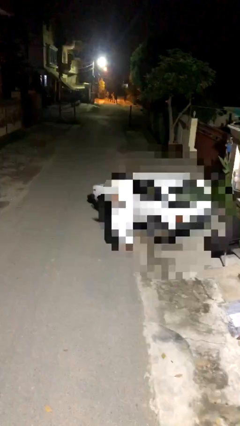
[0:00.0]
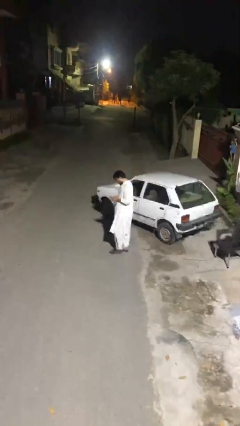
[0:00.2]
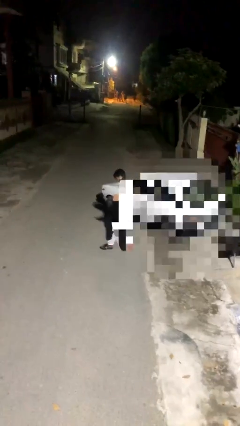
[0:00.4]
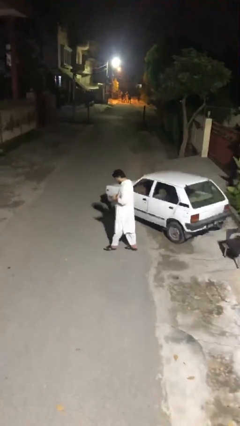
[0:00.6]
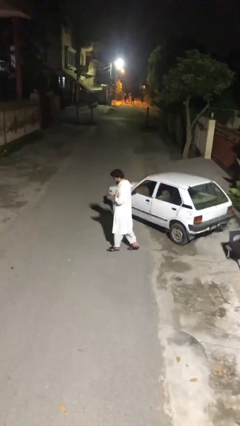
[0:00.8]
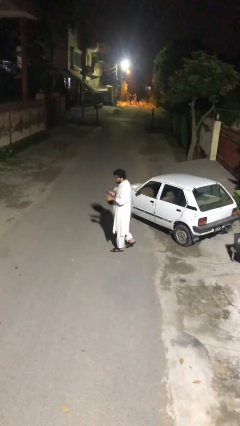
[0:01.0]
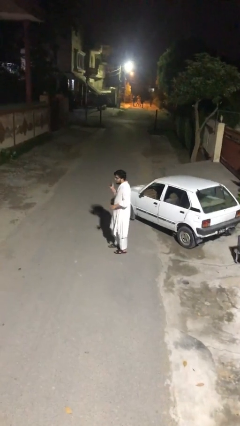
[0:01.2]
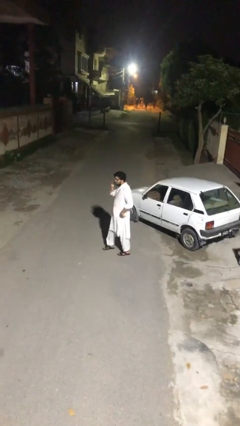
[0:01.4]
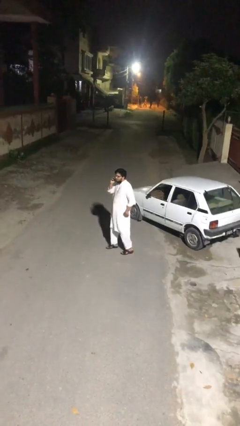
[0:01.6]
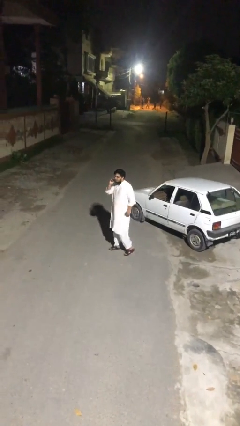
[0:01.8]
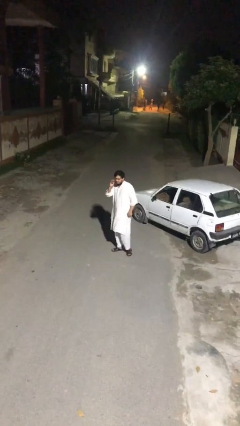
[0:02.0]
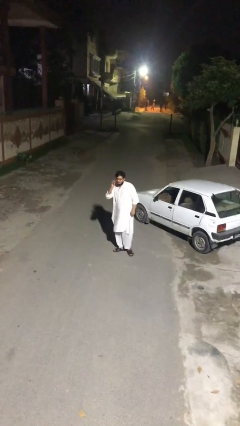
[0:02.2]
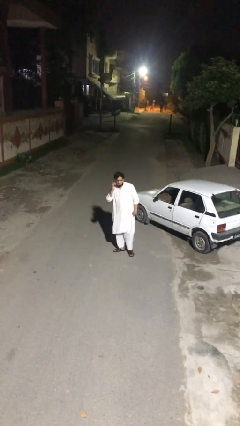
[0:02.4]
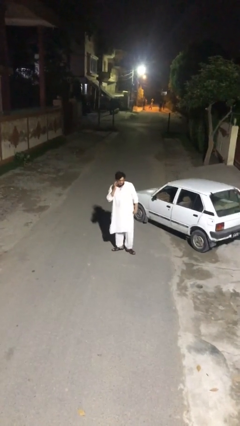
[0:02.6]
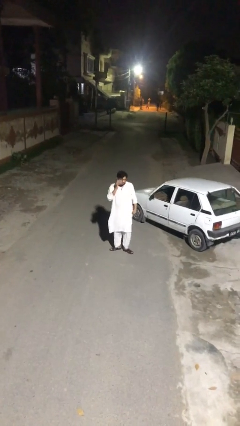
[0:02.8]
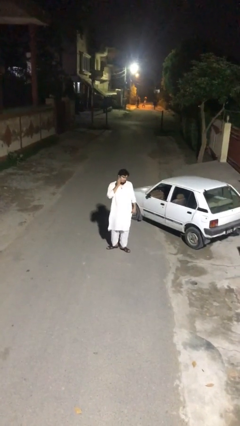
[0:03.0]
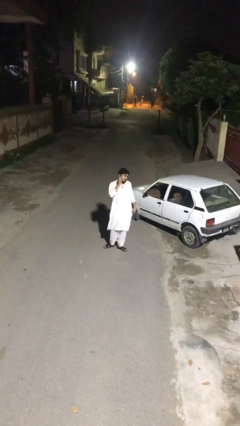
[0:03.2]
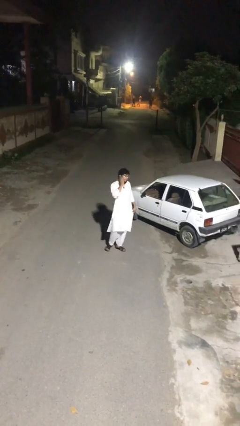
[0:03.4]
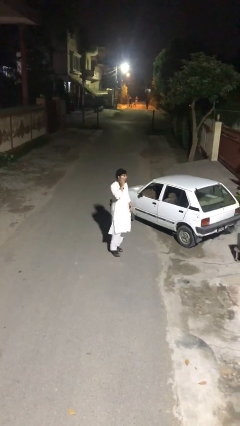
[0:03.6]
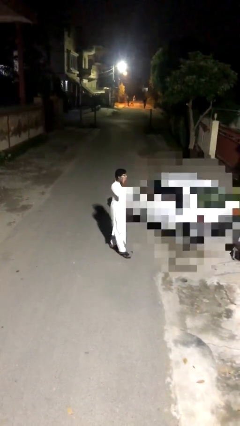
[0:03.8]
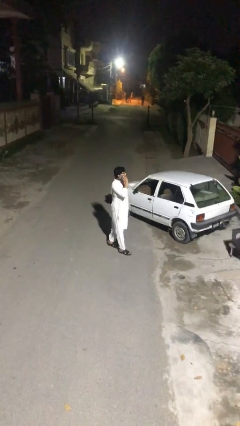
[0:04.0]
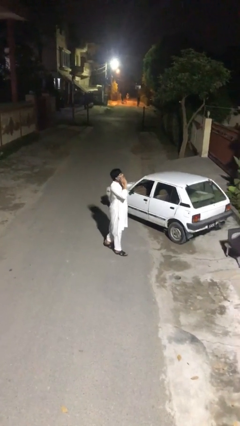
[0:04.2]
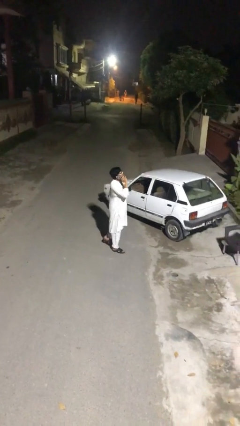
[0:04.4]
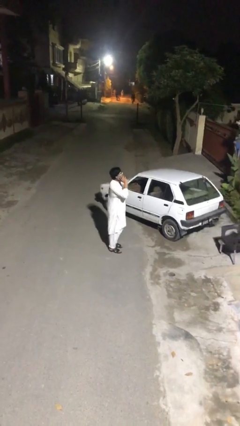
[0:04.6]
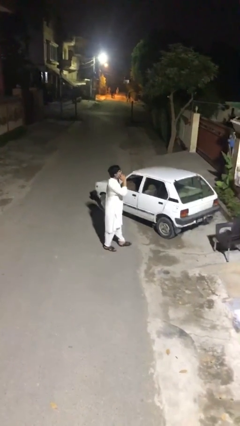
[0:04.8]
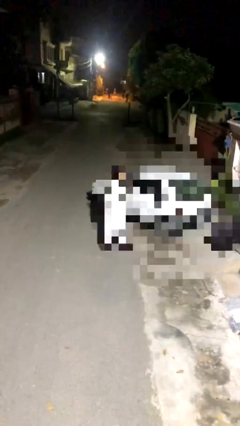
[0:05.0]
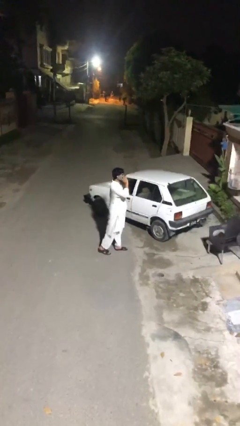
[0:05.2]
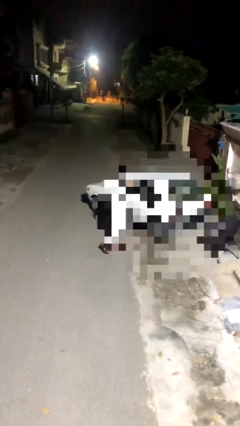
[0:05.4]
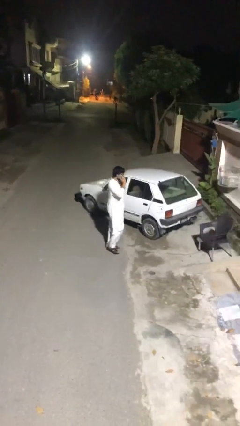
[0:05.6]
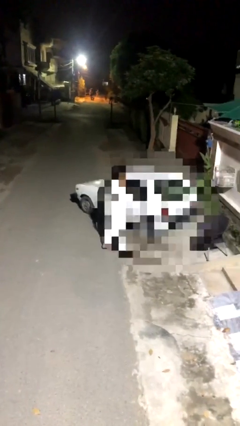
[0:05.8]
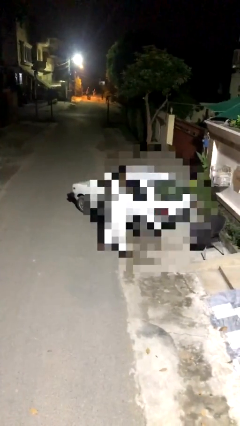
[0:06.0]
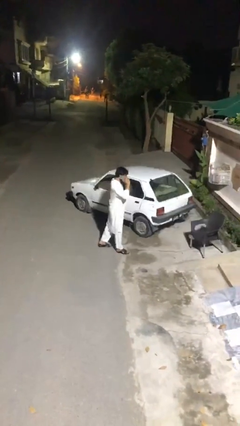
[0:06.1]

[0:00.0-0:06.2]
person talks on phone

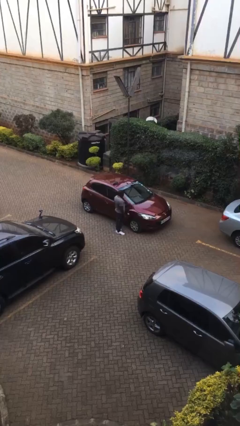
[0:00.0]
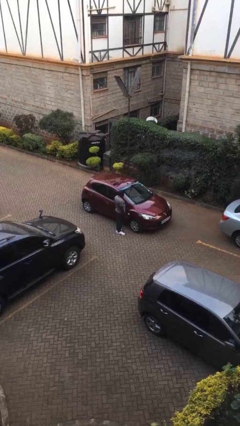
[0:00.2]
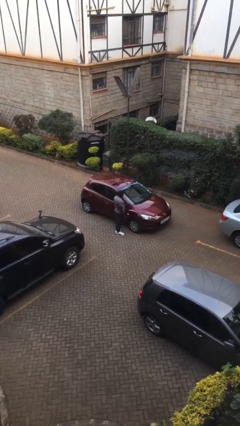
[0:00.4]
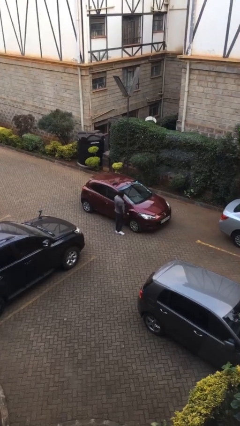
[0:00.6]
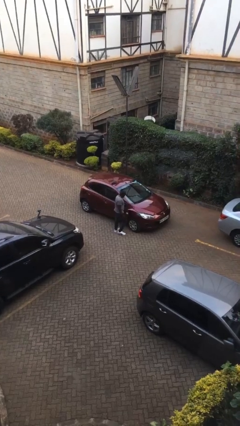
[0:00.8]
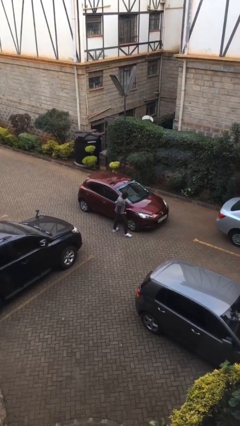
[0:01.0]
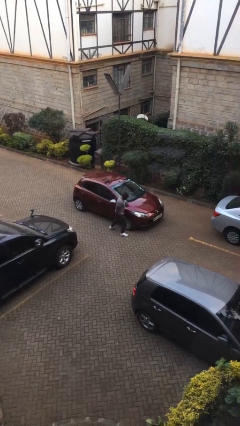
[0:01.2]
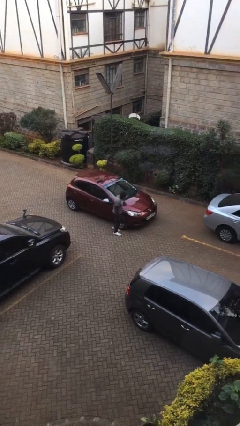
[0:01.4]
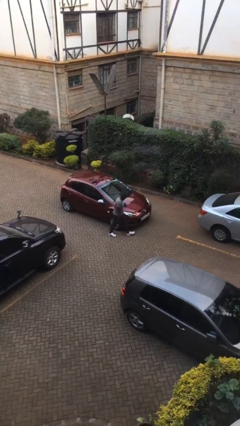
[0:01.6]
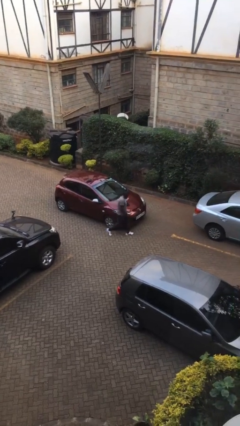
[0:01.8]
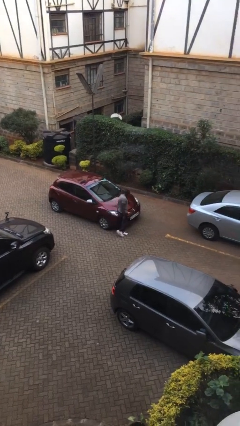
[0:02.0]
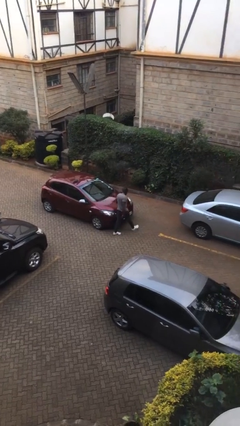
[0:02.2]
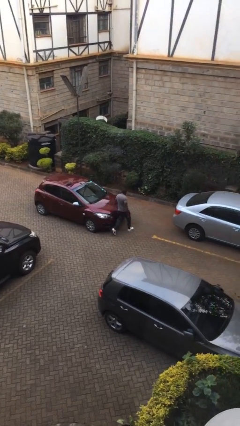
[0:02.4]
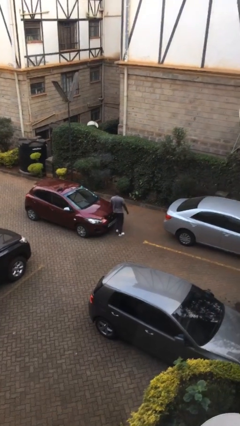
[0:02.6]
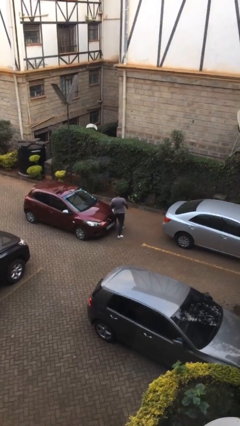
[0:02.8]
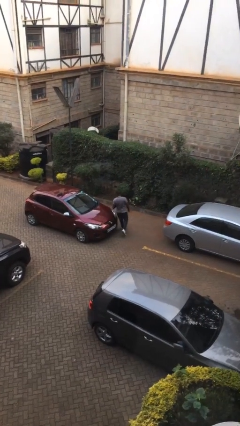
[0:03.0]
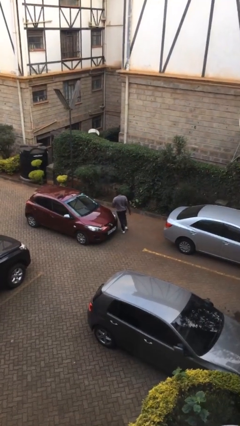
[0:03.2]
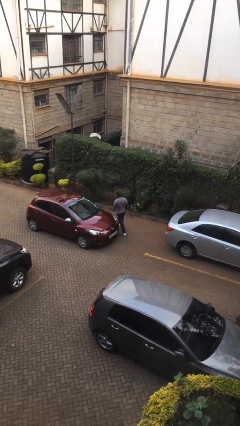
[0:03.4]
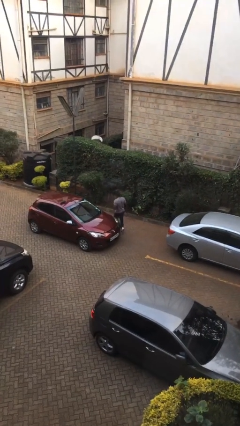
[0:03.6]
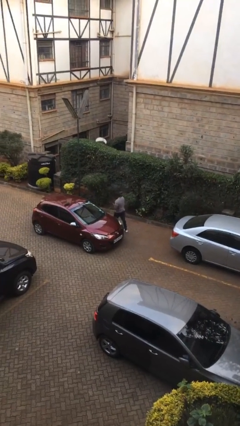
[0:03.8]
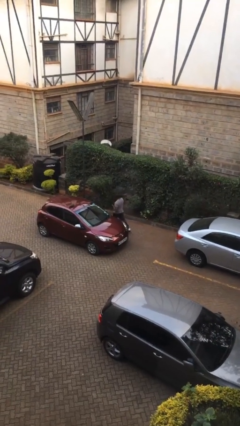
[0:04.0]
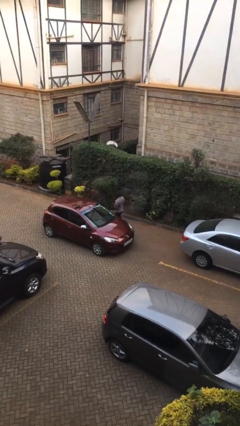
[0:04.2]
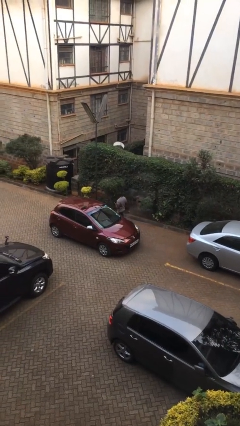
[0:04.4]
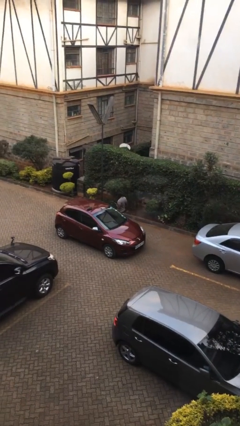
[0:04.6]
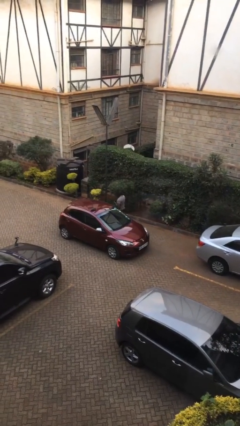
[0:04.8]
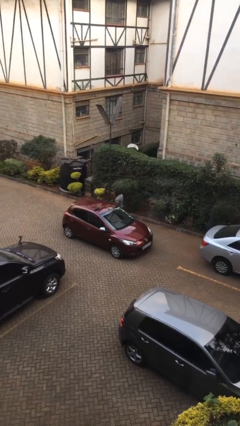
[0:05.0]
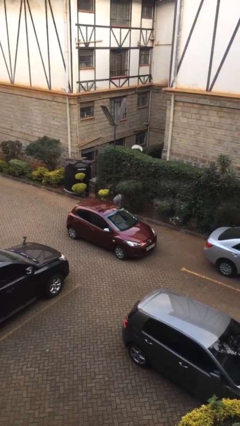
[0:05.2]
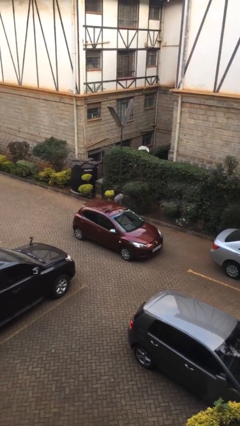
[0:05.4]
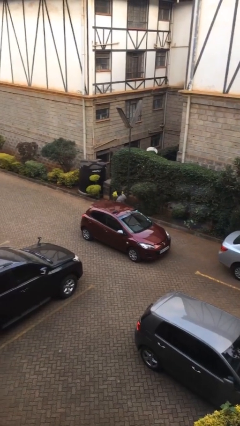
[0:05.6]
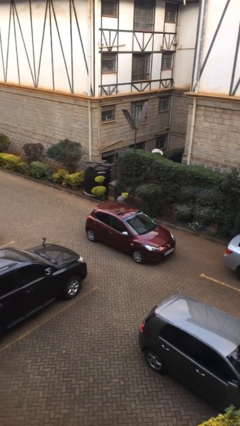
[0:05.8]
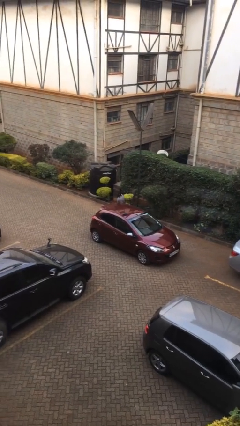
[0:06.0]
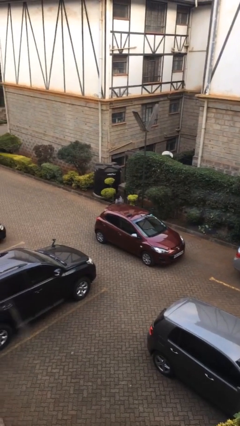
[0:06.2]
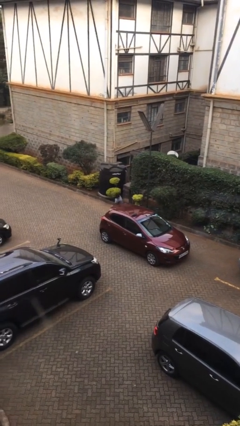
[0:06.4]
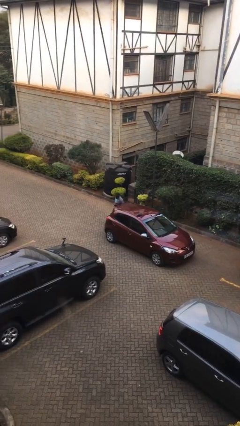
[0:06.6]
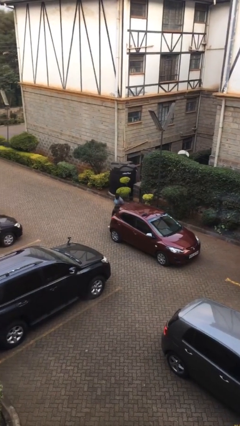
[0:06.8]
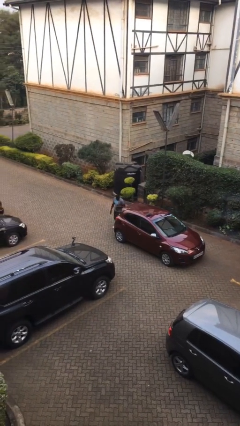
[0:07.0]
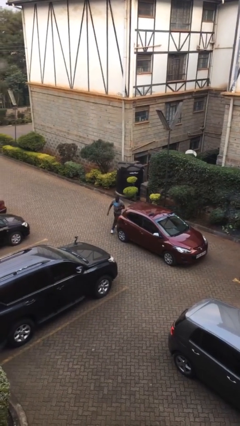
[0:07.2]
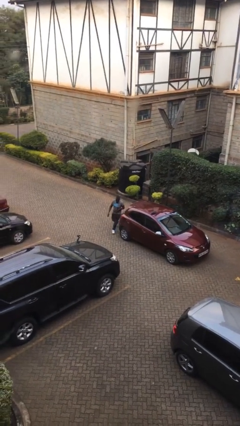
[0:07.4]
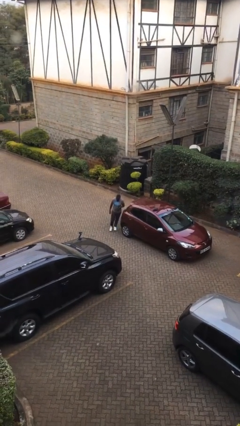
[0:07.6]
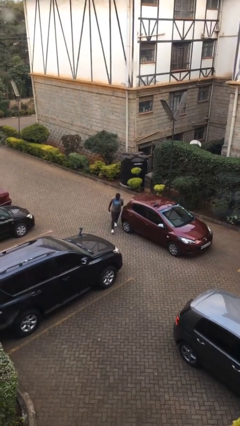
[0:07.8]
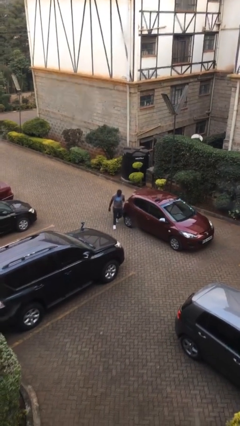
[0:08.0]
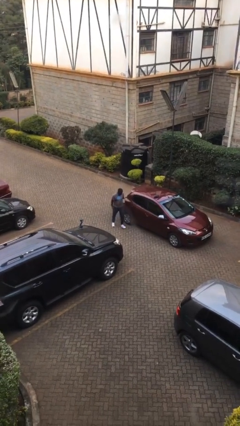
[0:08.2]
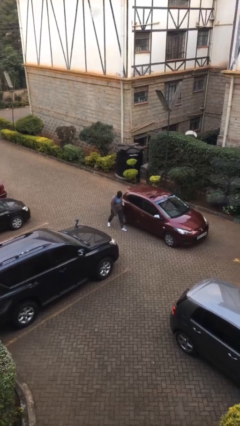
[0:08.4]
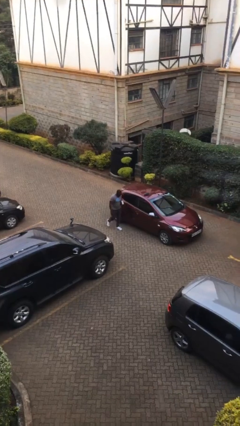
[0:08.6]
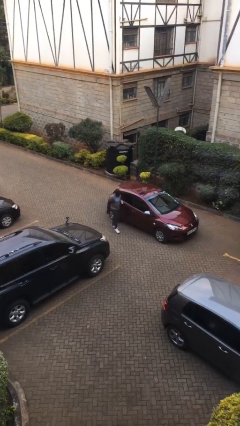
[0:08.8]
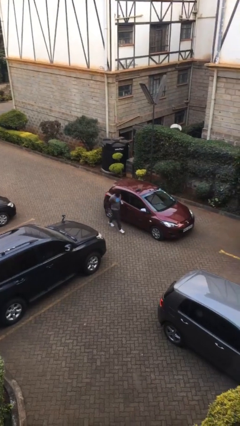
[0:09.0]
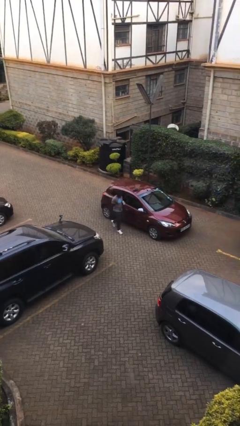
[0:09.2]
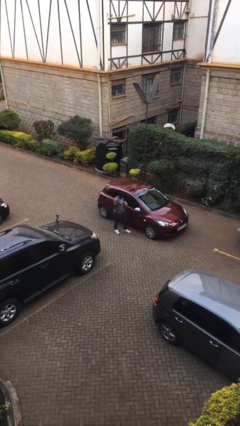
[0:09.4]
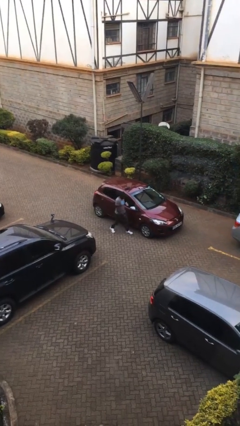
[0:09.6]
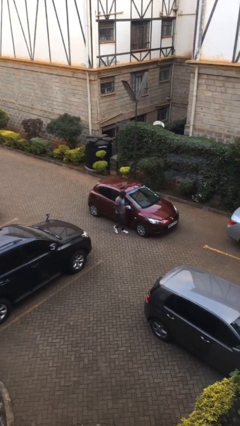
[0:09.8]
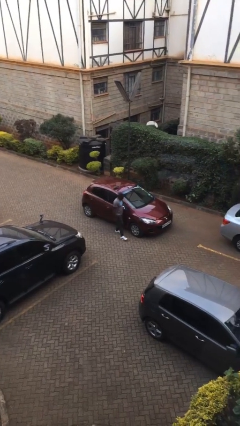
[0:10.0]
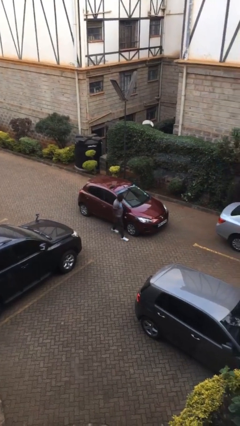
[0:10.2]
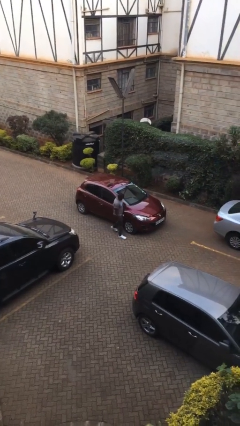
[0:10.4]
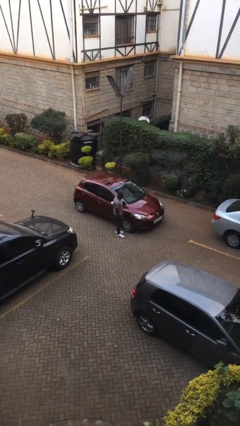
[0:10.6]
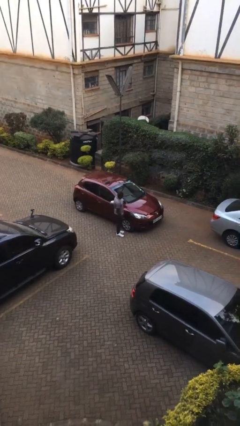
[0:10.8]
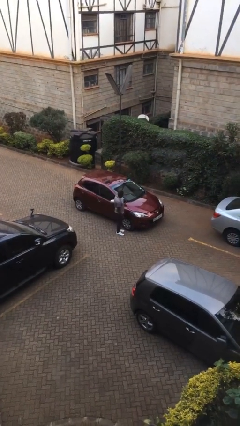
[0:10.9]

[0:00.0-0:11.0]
person walks around car

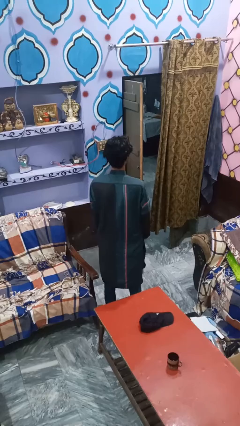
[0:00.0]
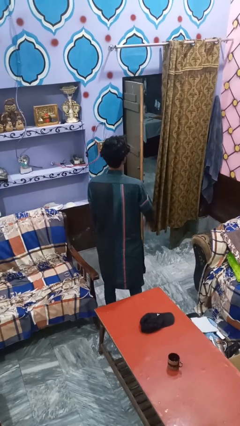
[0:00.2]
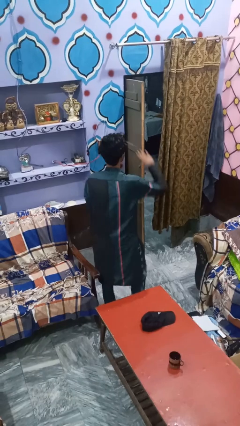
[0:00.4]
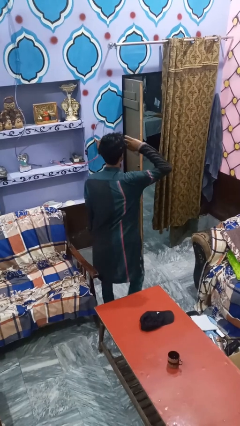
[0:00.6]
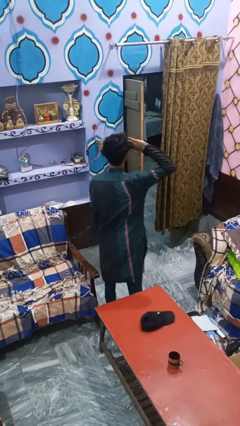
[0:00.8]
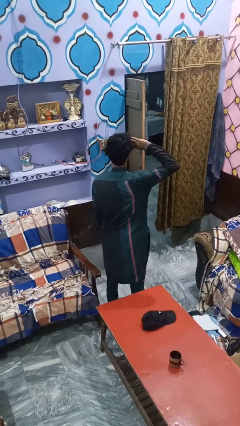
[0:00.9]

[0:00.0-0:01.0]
person salutes

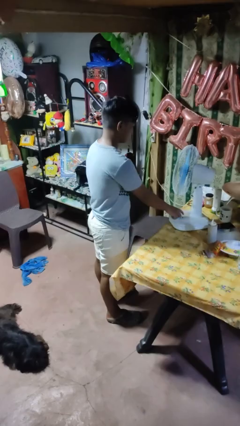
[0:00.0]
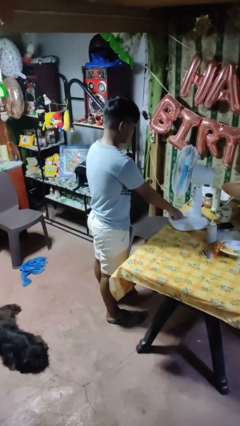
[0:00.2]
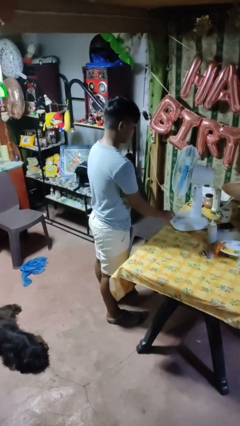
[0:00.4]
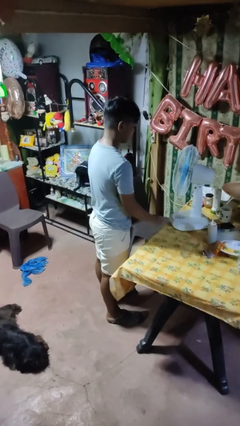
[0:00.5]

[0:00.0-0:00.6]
person turns on fan
